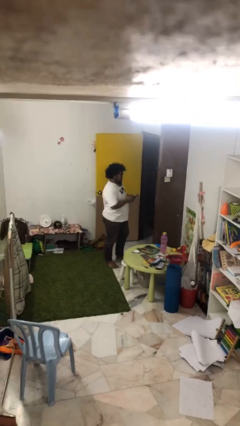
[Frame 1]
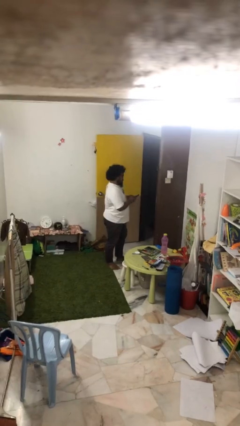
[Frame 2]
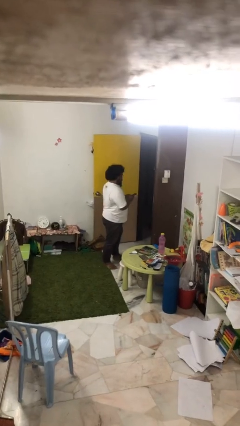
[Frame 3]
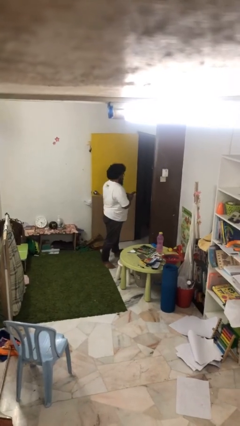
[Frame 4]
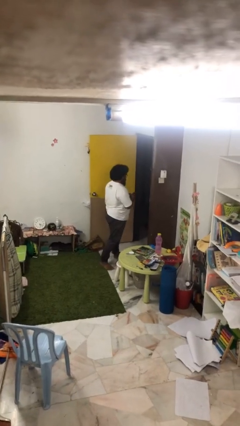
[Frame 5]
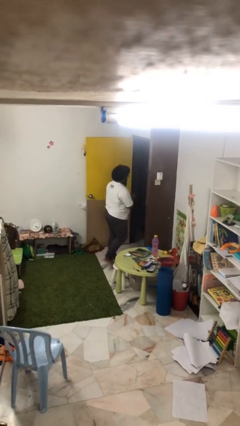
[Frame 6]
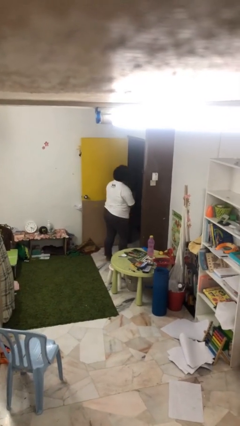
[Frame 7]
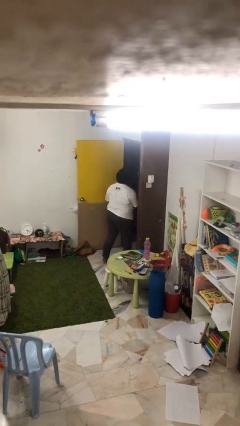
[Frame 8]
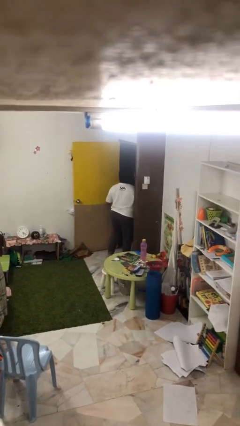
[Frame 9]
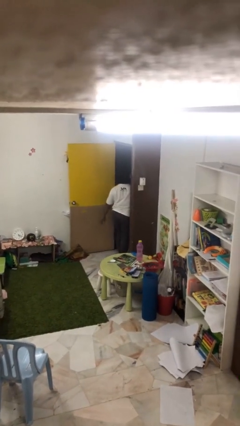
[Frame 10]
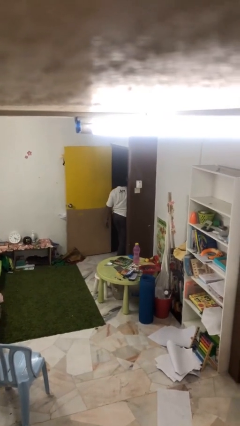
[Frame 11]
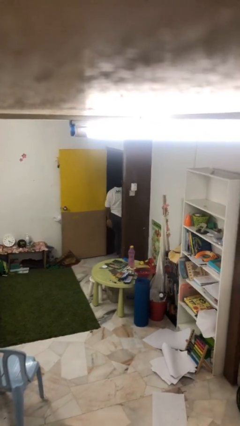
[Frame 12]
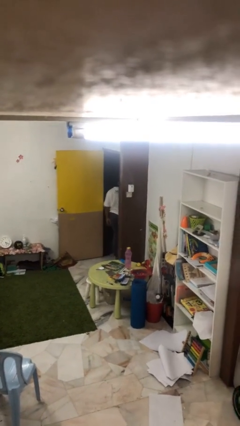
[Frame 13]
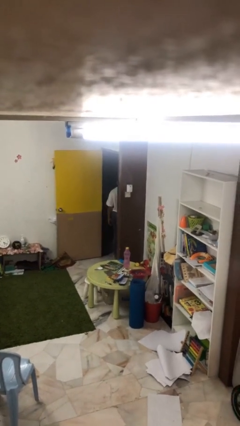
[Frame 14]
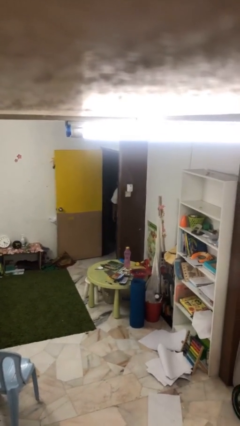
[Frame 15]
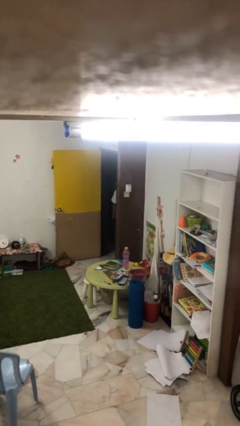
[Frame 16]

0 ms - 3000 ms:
person exits scene through structure

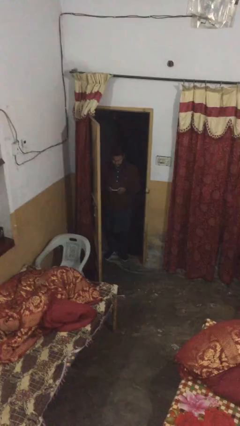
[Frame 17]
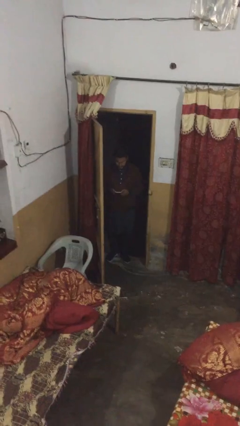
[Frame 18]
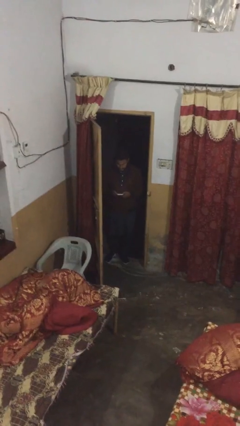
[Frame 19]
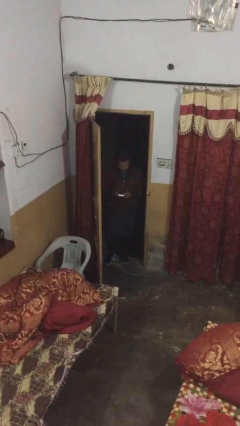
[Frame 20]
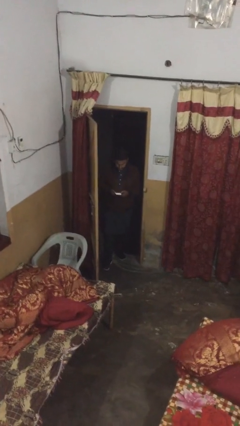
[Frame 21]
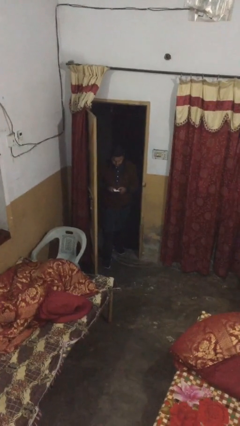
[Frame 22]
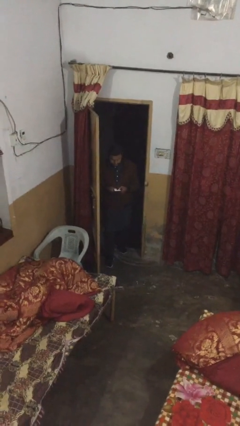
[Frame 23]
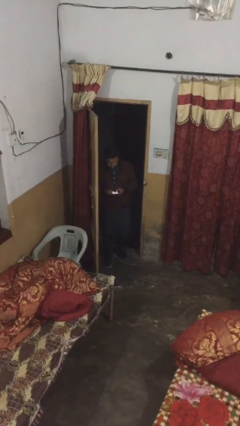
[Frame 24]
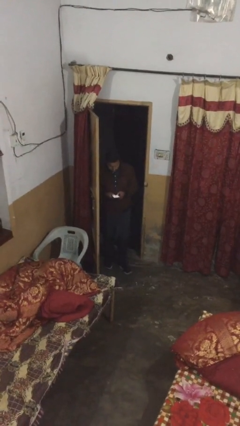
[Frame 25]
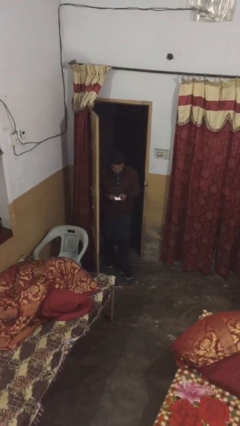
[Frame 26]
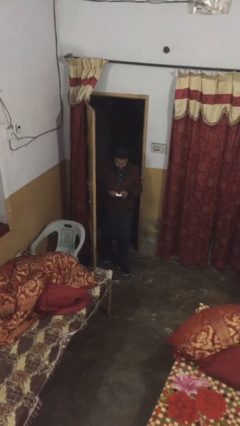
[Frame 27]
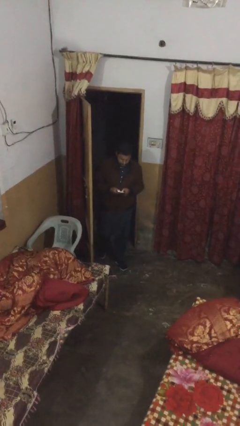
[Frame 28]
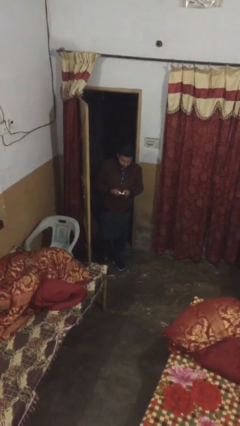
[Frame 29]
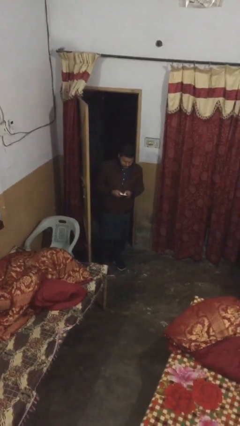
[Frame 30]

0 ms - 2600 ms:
person enters scene through structure

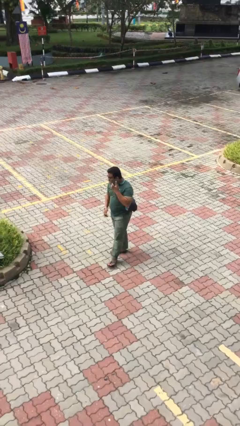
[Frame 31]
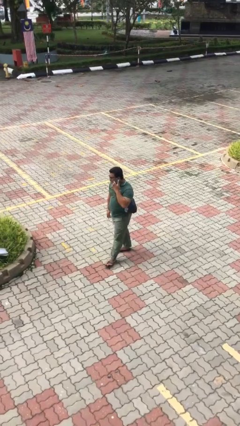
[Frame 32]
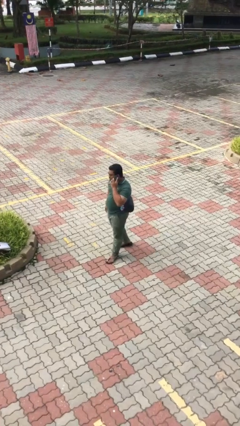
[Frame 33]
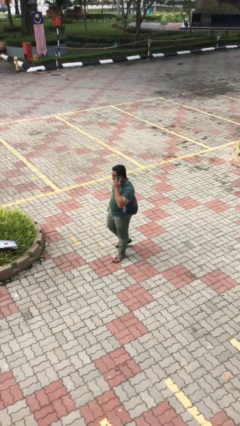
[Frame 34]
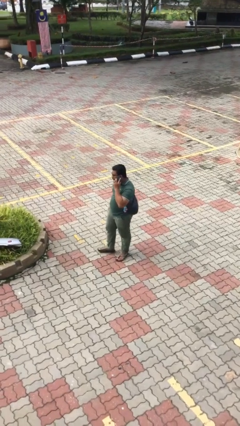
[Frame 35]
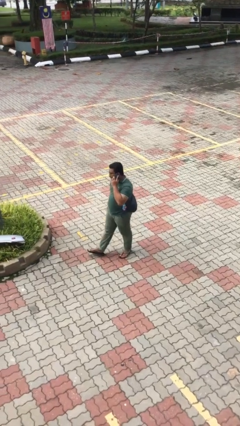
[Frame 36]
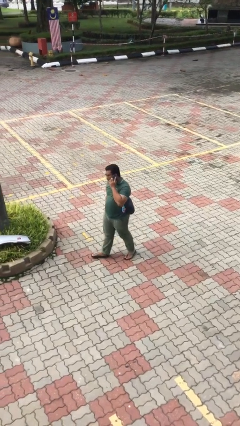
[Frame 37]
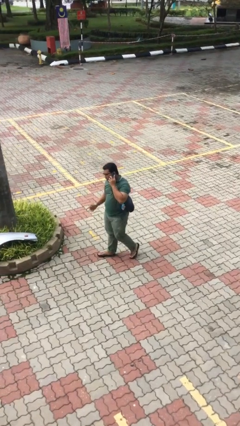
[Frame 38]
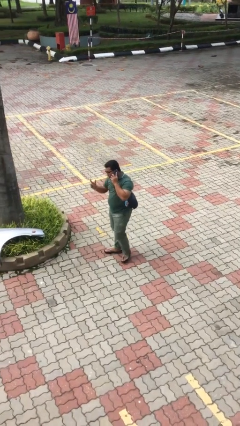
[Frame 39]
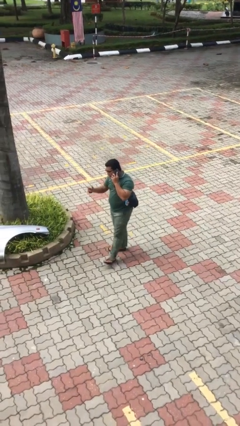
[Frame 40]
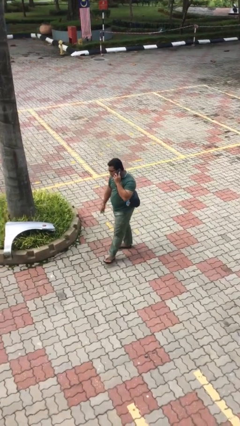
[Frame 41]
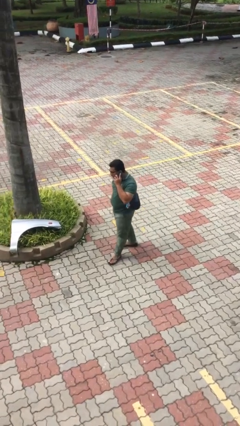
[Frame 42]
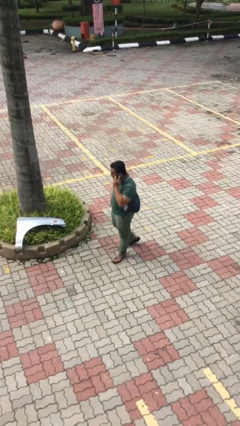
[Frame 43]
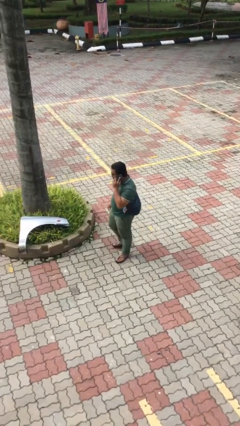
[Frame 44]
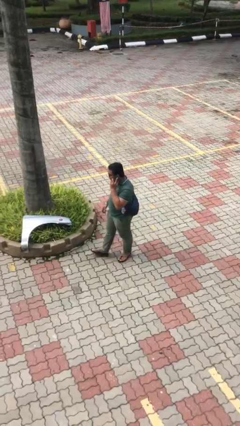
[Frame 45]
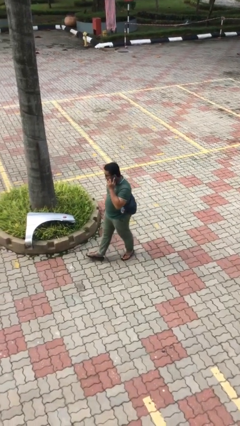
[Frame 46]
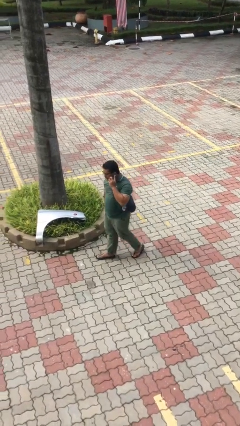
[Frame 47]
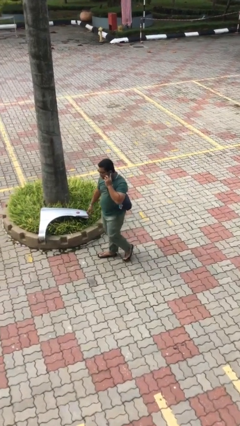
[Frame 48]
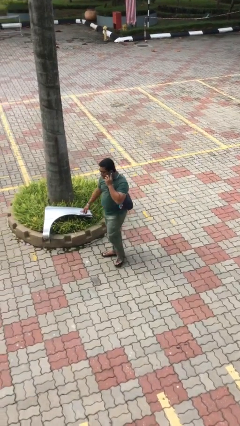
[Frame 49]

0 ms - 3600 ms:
person talks on phone

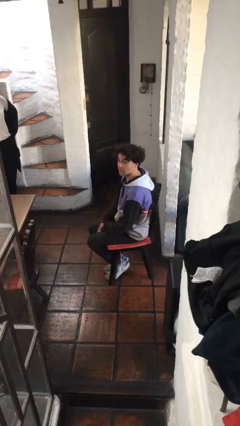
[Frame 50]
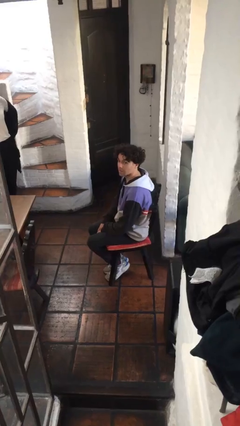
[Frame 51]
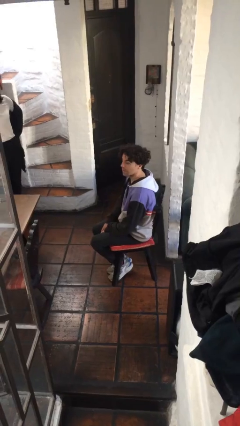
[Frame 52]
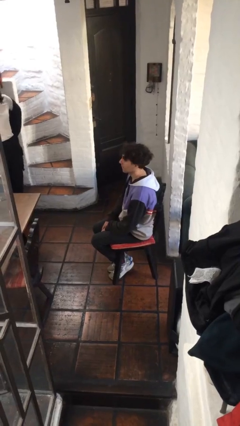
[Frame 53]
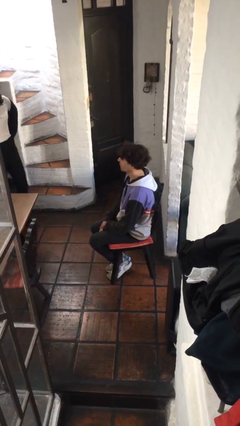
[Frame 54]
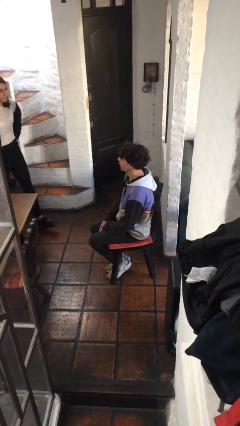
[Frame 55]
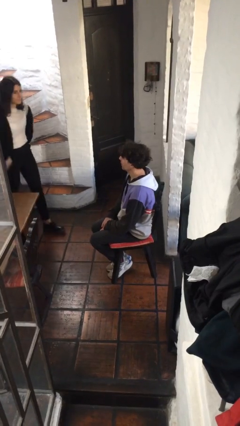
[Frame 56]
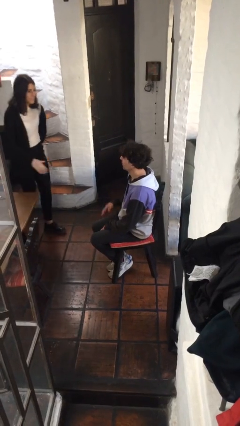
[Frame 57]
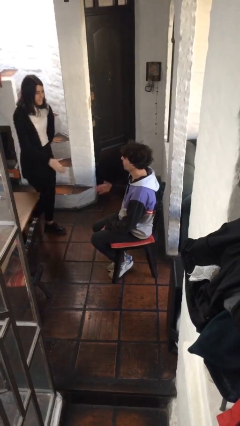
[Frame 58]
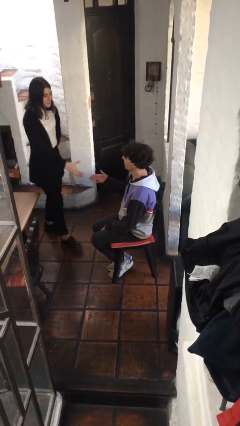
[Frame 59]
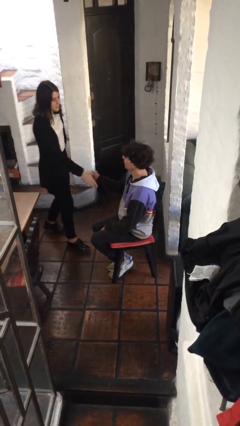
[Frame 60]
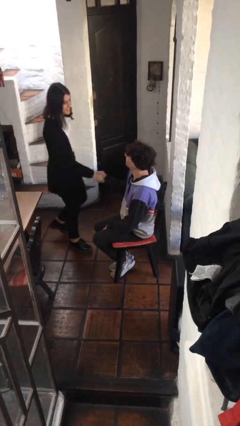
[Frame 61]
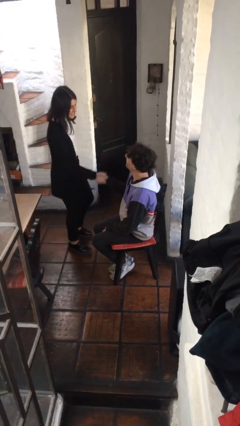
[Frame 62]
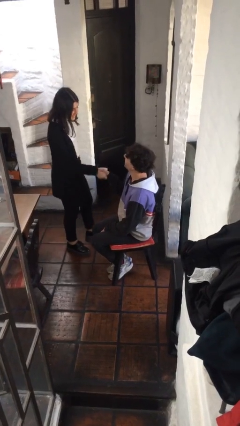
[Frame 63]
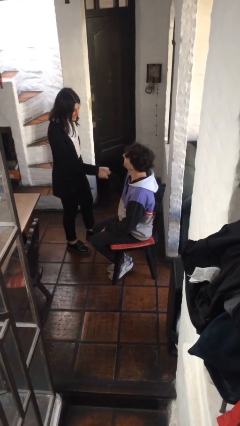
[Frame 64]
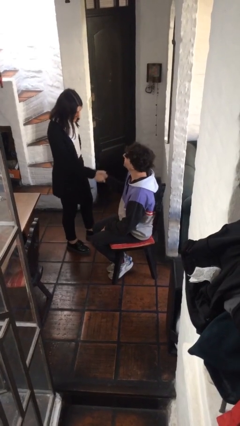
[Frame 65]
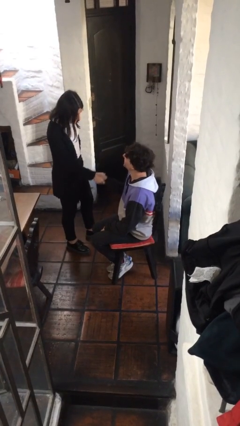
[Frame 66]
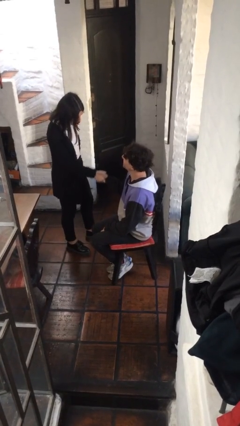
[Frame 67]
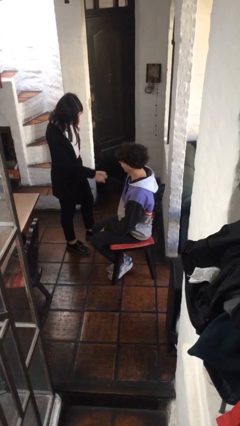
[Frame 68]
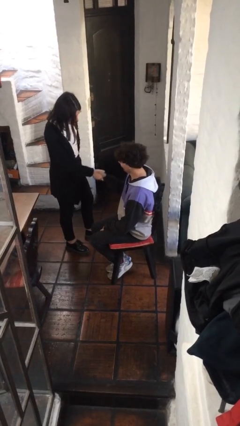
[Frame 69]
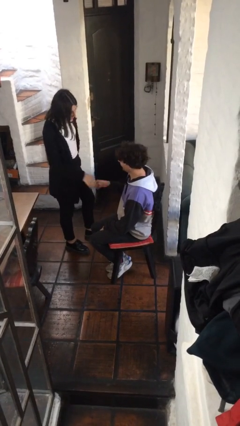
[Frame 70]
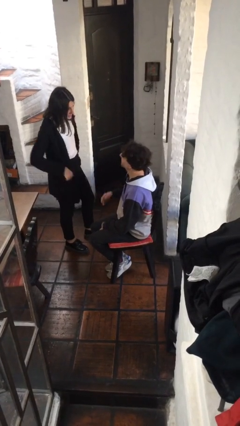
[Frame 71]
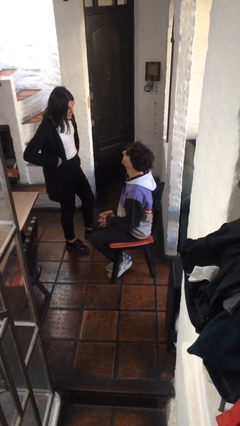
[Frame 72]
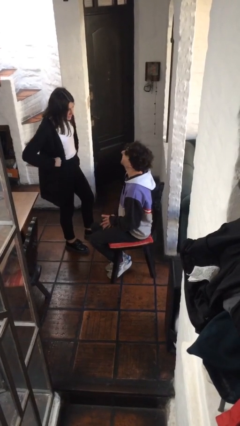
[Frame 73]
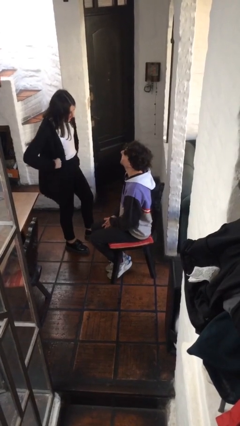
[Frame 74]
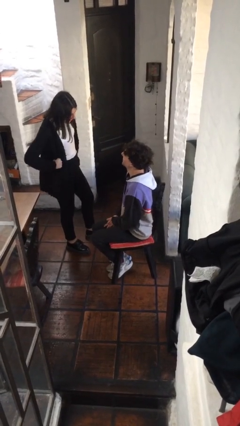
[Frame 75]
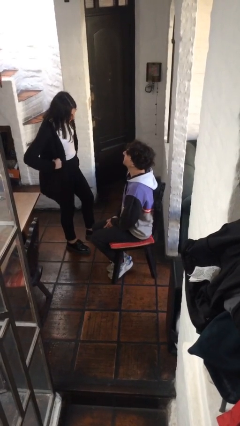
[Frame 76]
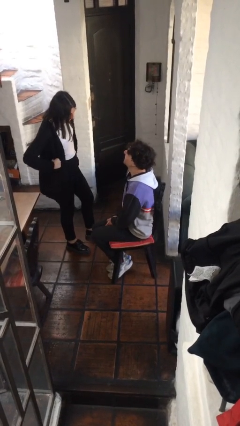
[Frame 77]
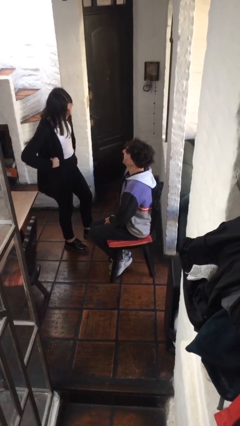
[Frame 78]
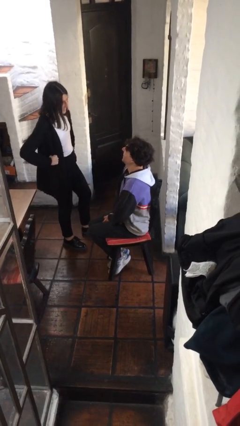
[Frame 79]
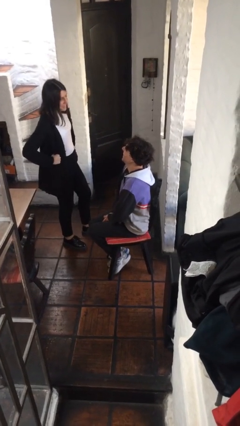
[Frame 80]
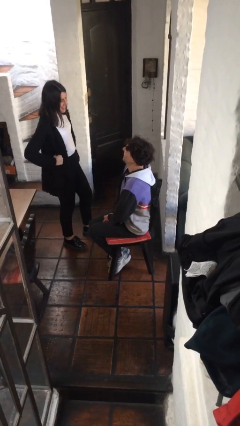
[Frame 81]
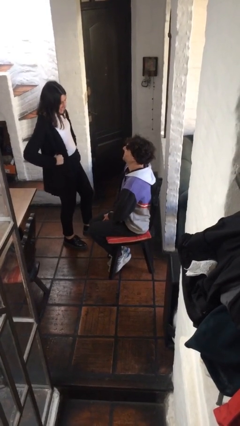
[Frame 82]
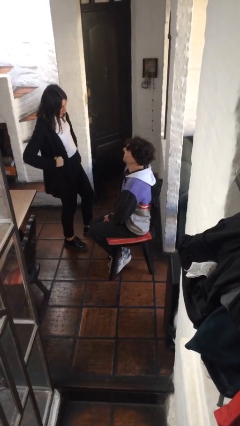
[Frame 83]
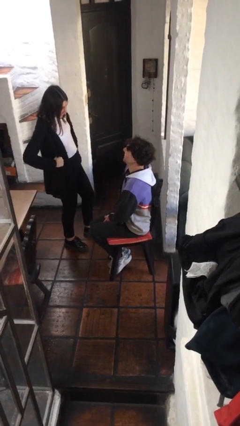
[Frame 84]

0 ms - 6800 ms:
person shakes hand

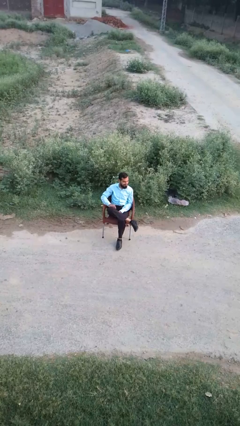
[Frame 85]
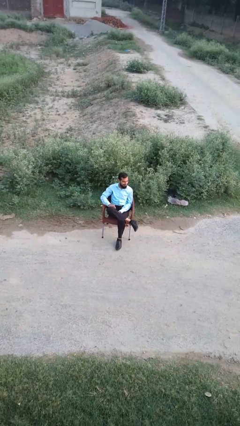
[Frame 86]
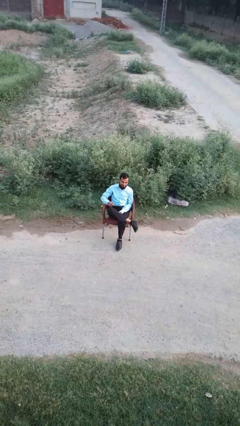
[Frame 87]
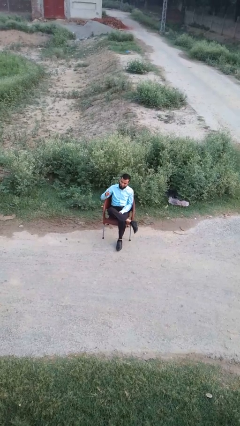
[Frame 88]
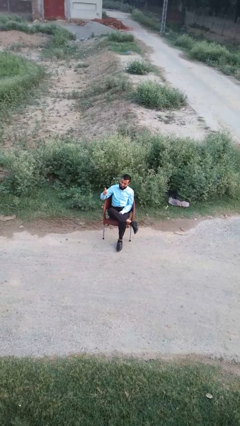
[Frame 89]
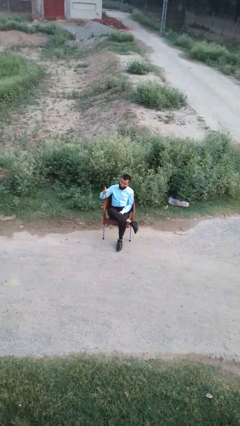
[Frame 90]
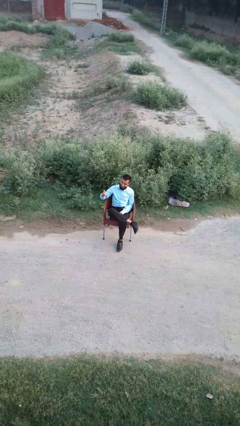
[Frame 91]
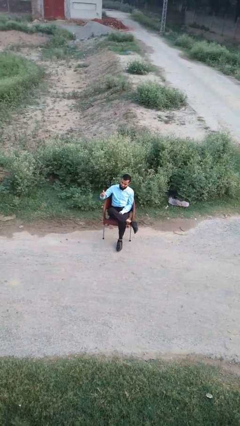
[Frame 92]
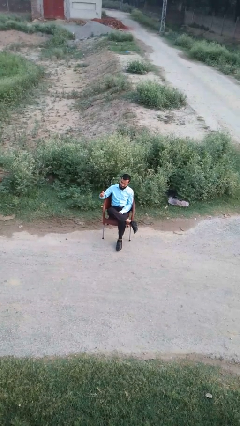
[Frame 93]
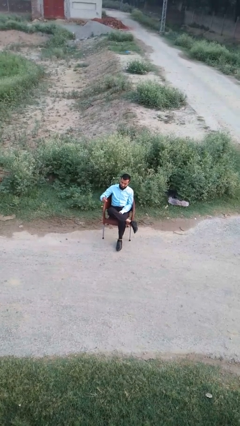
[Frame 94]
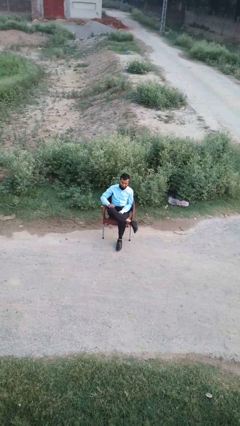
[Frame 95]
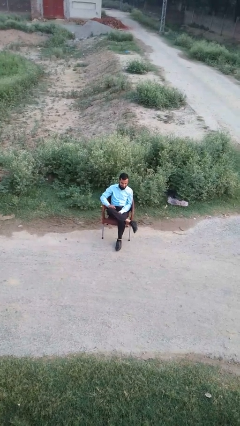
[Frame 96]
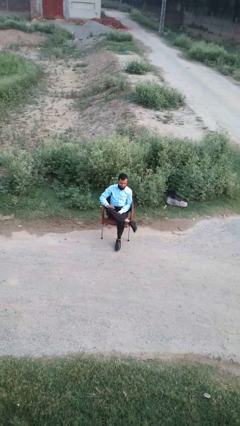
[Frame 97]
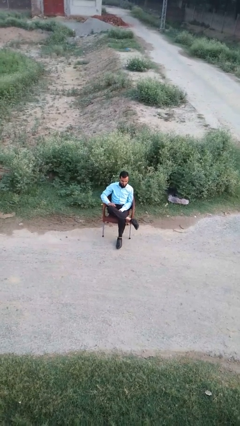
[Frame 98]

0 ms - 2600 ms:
person gestures thumbs up
